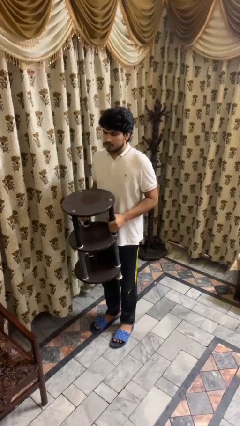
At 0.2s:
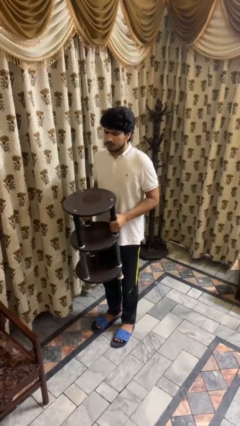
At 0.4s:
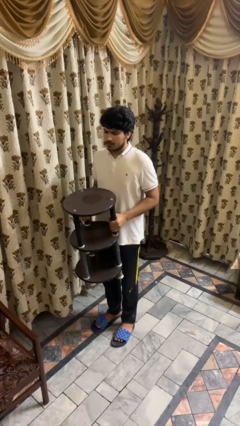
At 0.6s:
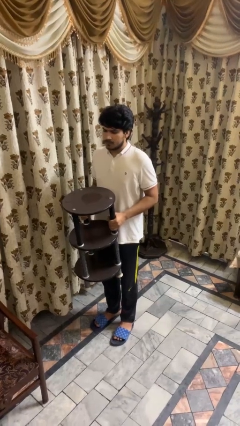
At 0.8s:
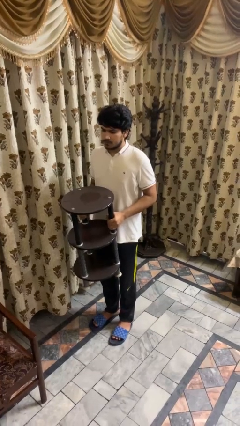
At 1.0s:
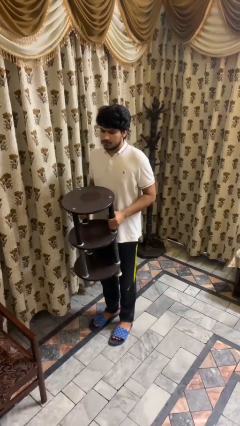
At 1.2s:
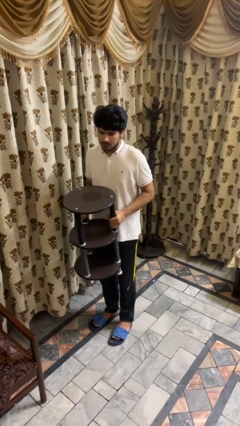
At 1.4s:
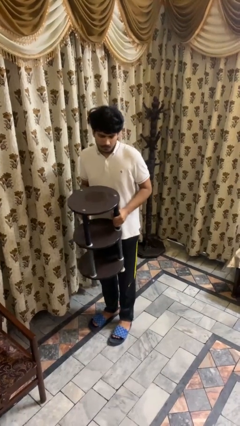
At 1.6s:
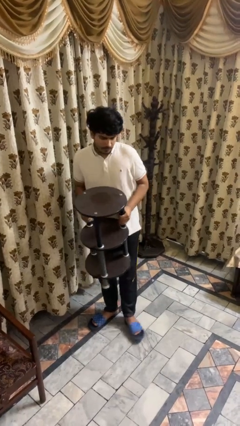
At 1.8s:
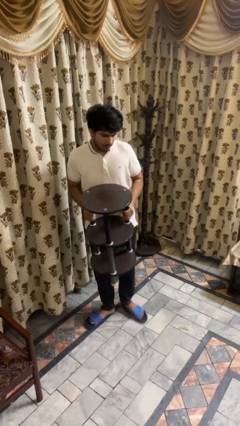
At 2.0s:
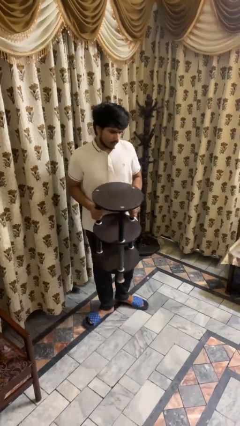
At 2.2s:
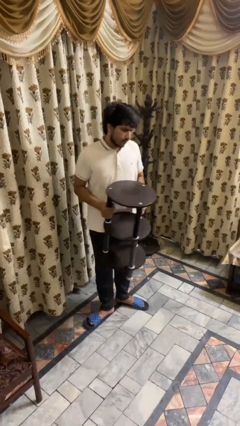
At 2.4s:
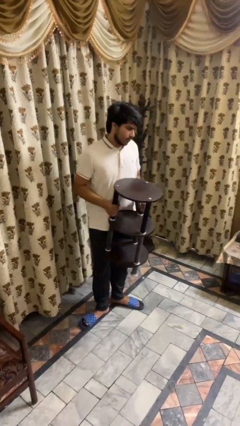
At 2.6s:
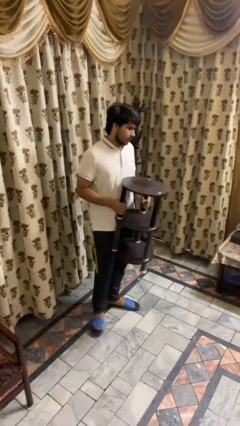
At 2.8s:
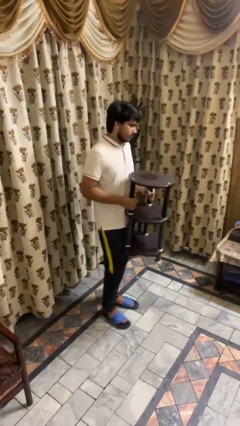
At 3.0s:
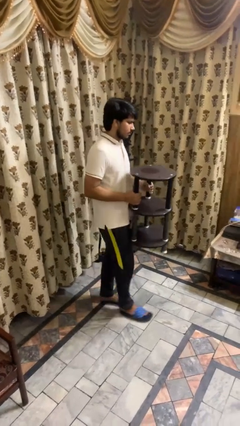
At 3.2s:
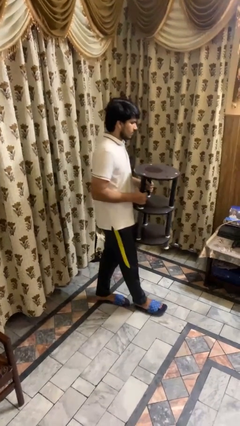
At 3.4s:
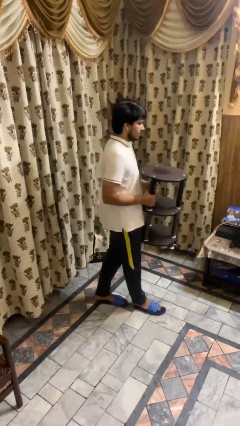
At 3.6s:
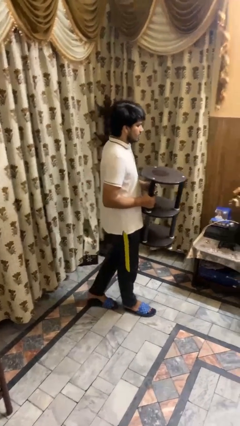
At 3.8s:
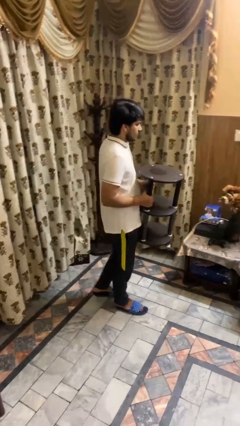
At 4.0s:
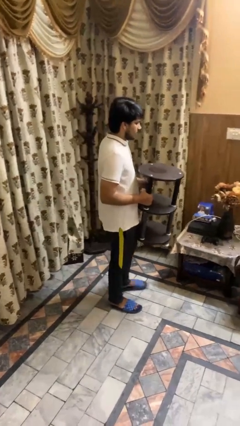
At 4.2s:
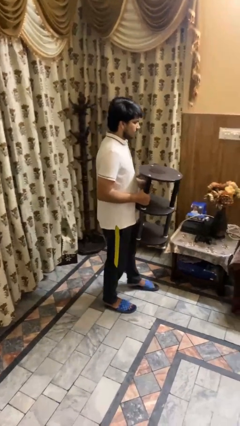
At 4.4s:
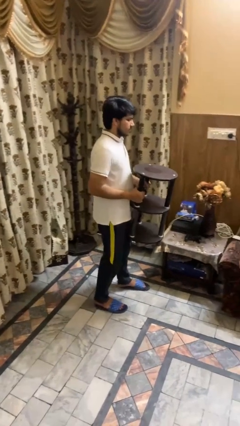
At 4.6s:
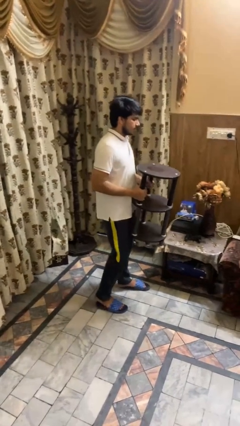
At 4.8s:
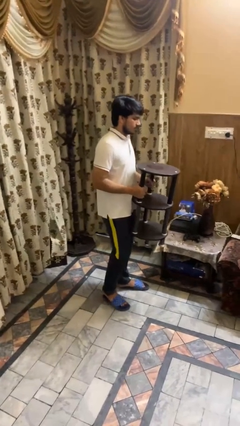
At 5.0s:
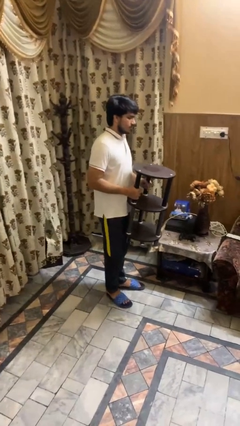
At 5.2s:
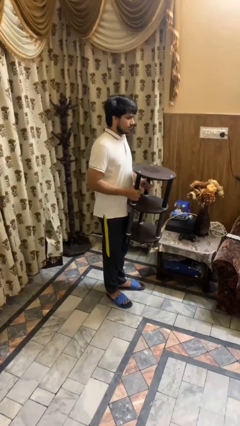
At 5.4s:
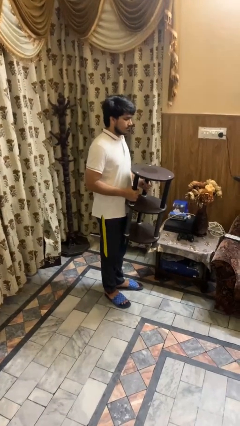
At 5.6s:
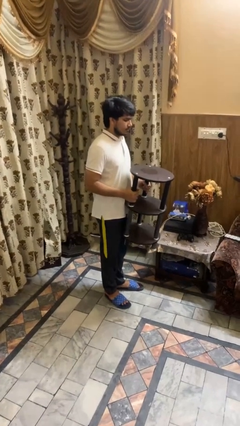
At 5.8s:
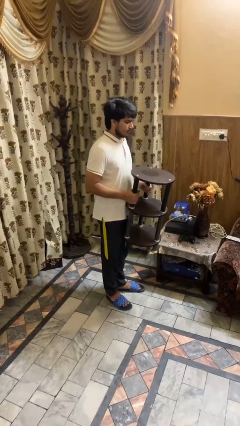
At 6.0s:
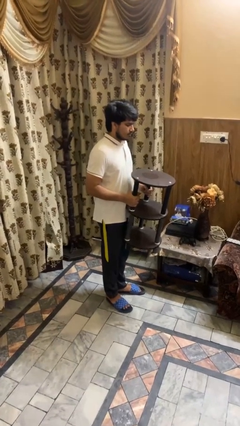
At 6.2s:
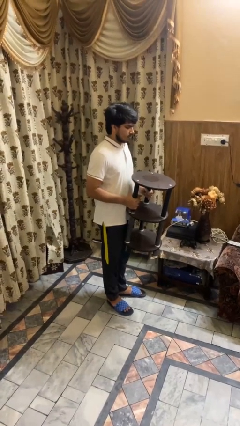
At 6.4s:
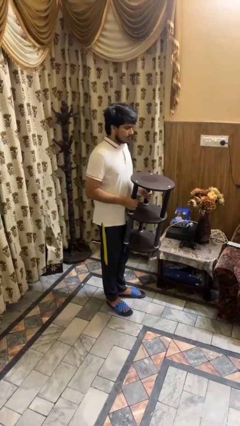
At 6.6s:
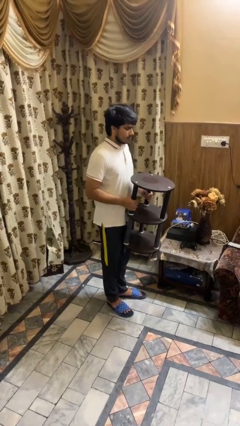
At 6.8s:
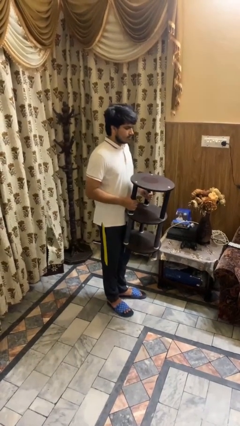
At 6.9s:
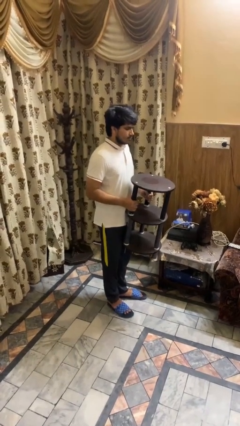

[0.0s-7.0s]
person carries furniture

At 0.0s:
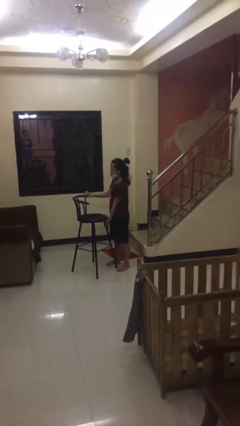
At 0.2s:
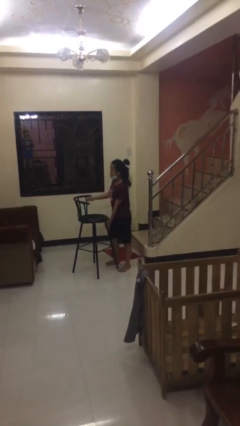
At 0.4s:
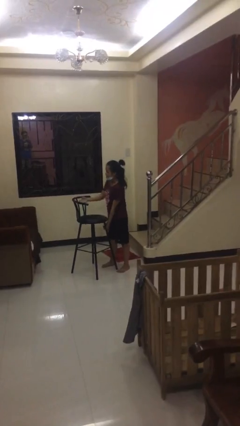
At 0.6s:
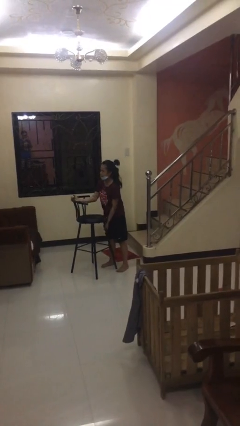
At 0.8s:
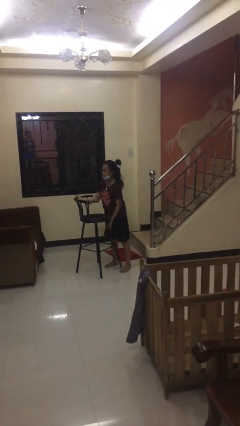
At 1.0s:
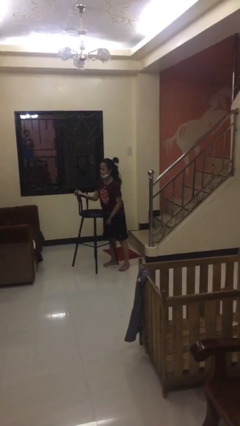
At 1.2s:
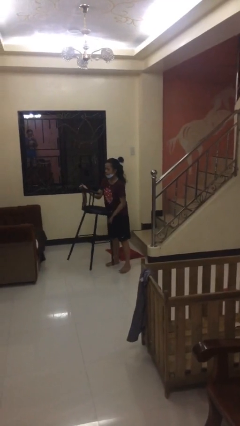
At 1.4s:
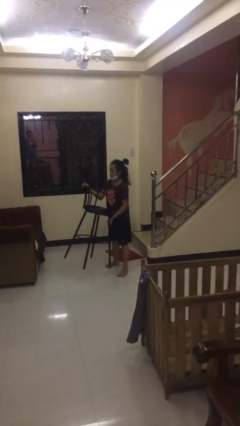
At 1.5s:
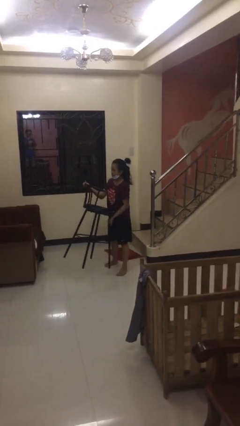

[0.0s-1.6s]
person picks up object from floor

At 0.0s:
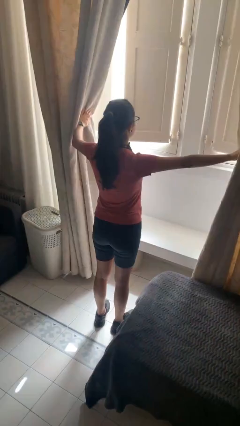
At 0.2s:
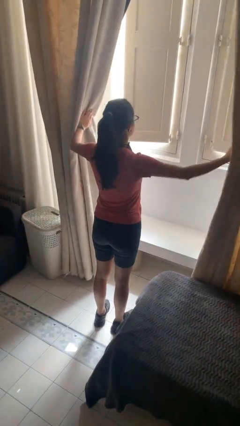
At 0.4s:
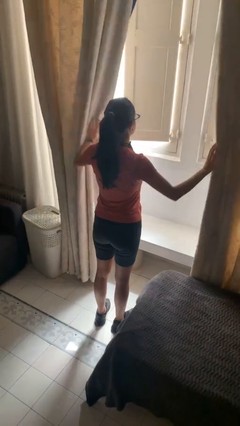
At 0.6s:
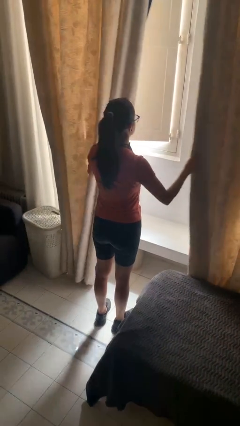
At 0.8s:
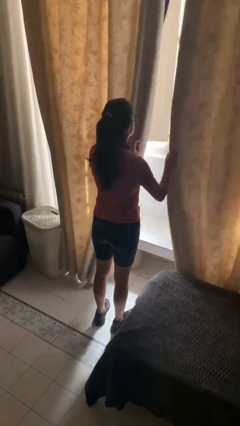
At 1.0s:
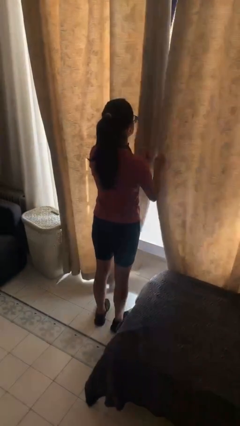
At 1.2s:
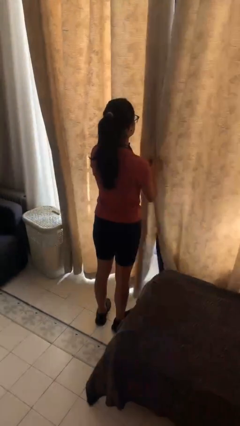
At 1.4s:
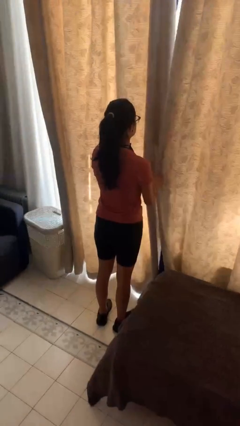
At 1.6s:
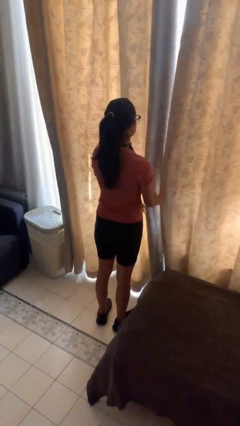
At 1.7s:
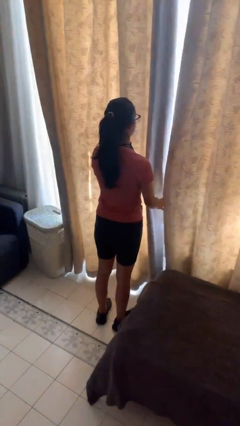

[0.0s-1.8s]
person closes curtains

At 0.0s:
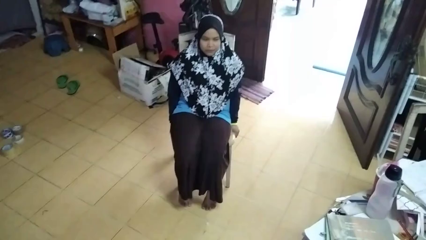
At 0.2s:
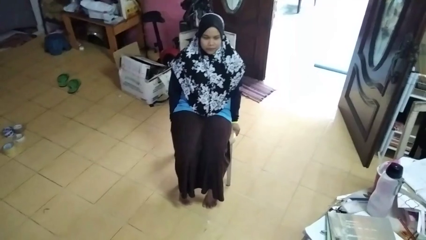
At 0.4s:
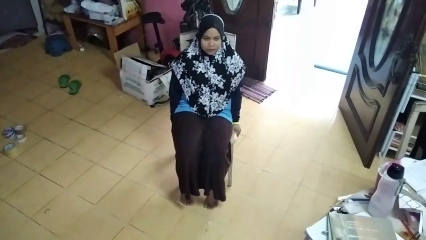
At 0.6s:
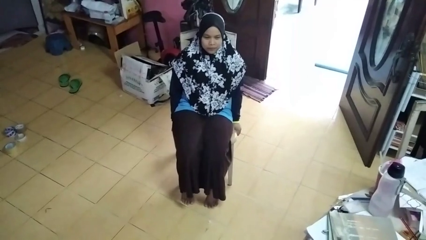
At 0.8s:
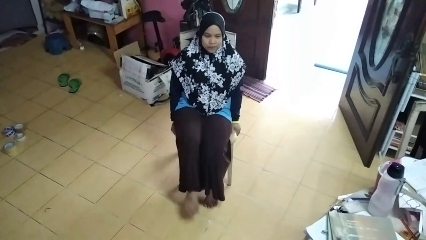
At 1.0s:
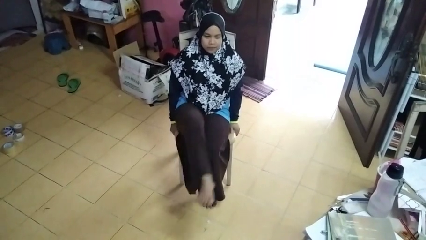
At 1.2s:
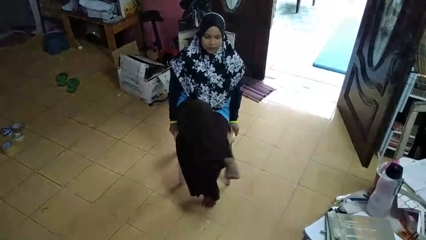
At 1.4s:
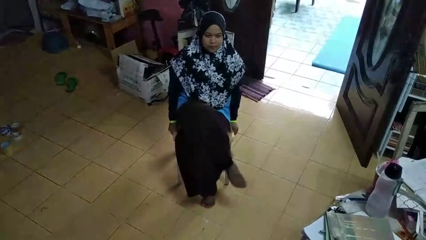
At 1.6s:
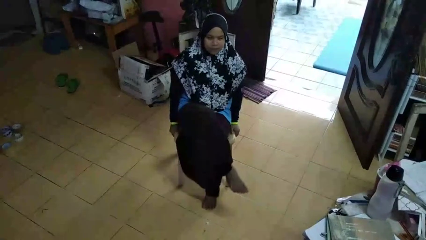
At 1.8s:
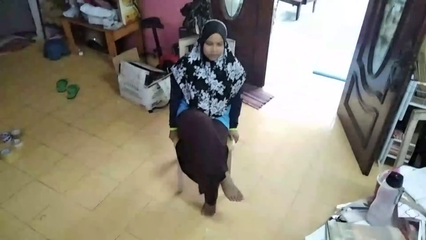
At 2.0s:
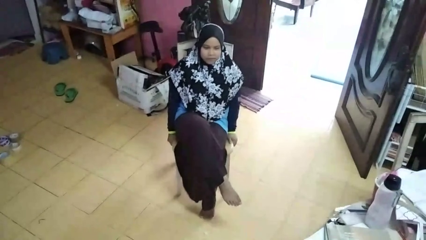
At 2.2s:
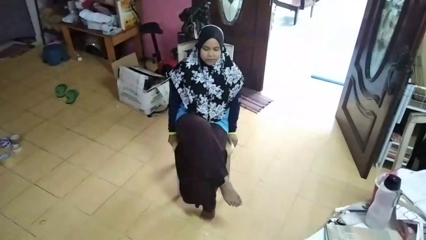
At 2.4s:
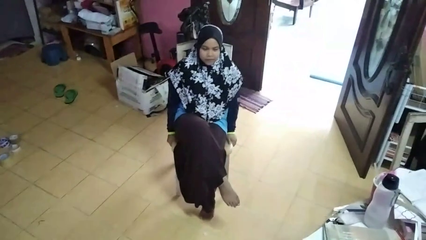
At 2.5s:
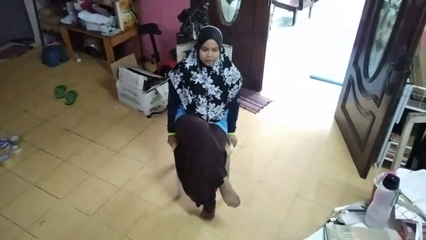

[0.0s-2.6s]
person crosses legs

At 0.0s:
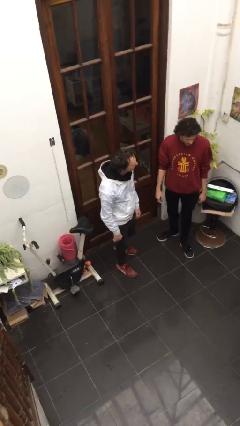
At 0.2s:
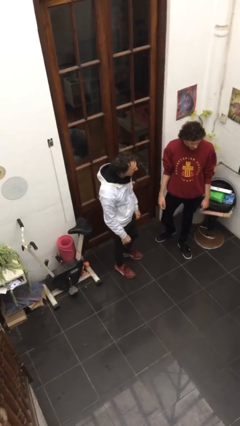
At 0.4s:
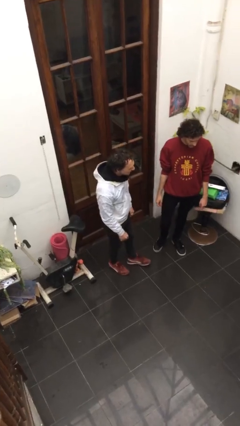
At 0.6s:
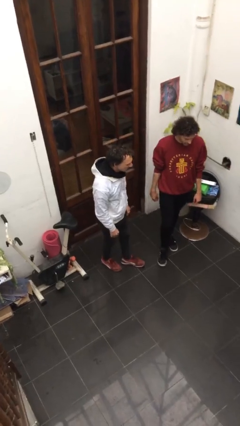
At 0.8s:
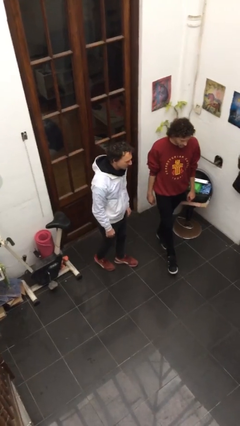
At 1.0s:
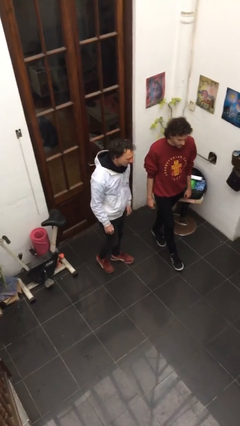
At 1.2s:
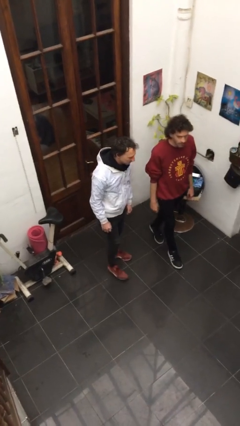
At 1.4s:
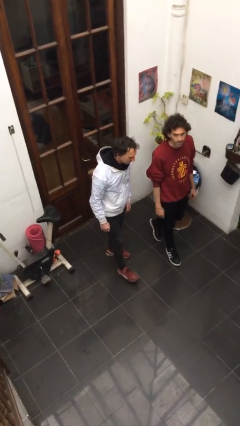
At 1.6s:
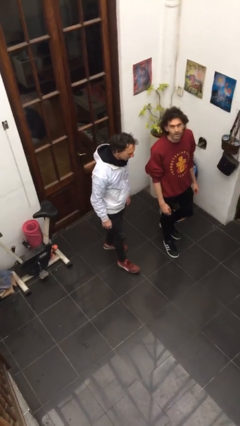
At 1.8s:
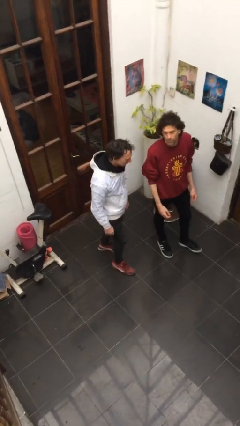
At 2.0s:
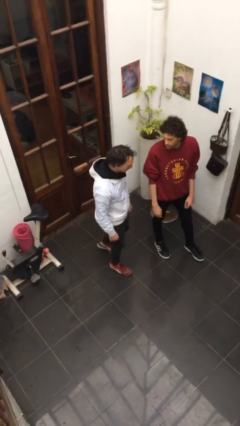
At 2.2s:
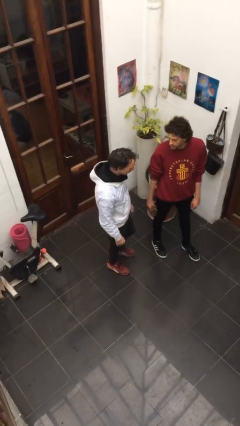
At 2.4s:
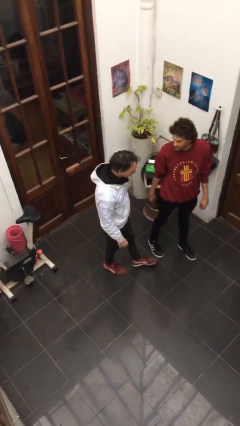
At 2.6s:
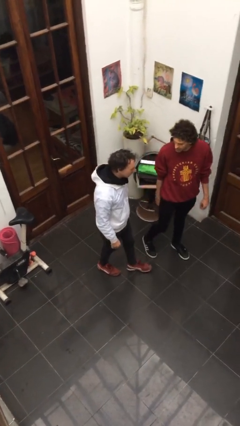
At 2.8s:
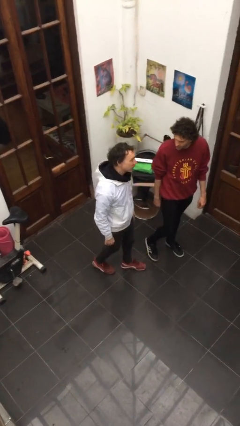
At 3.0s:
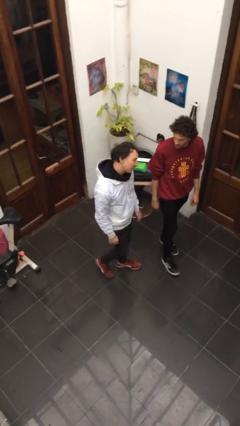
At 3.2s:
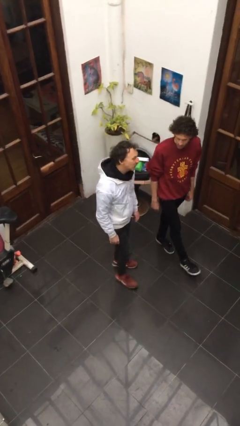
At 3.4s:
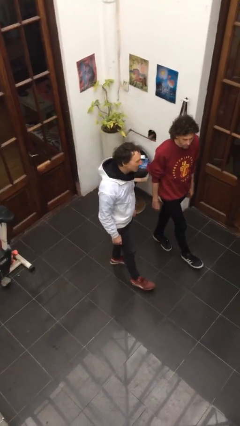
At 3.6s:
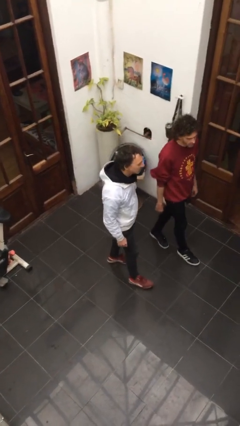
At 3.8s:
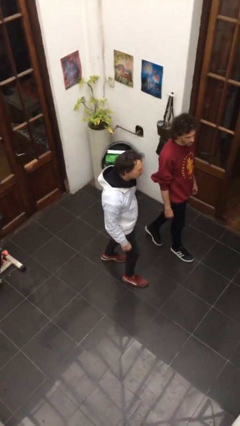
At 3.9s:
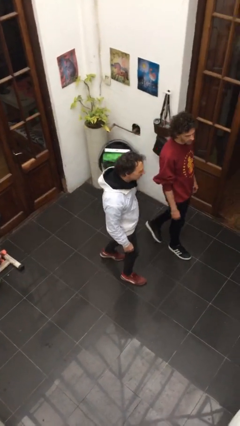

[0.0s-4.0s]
person talks to person

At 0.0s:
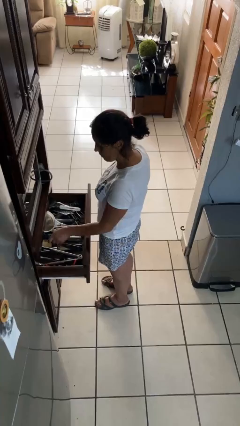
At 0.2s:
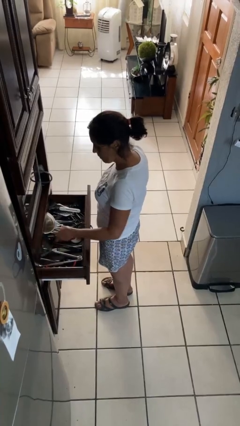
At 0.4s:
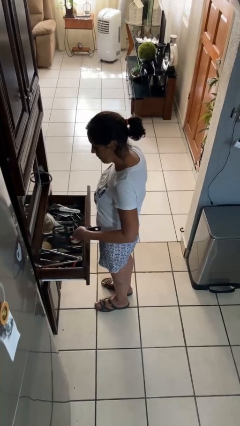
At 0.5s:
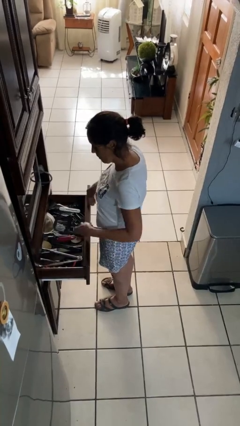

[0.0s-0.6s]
person takes object from kitchen drawer
